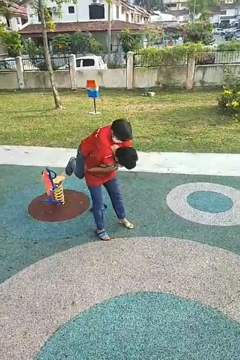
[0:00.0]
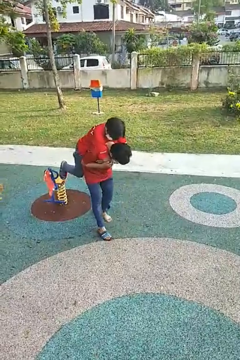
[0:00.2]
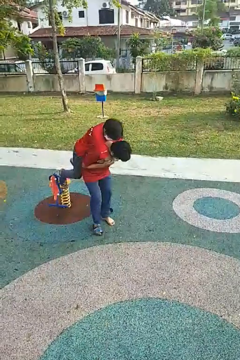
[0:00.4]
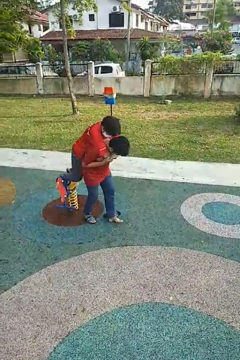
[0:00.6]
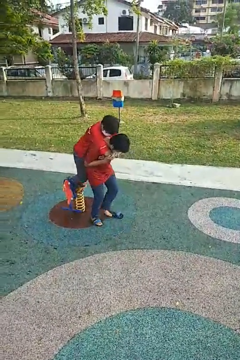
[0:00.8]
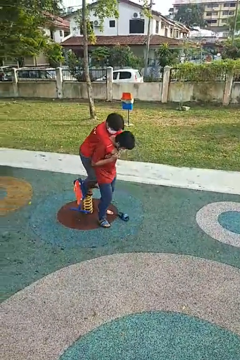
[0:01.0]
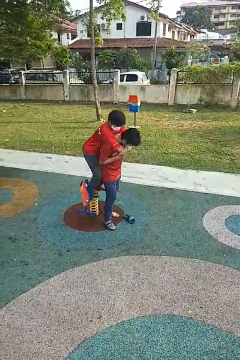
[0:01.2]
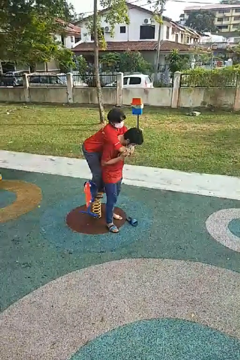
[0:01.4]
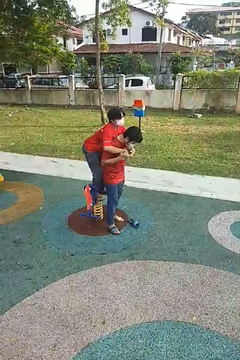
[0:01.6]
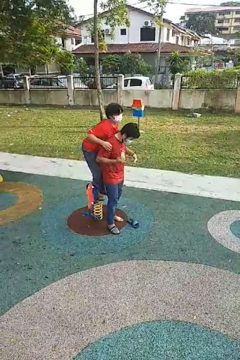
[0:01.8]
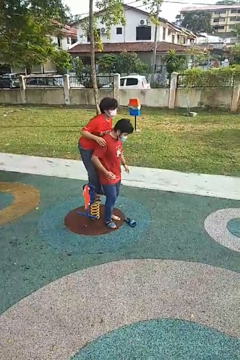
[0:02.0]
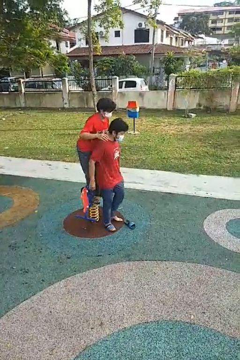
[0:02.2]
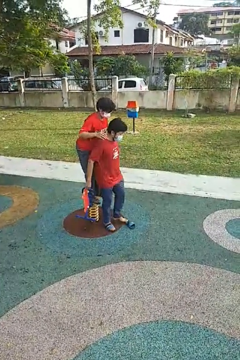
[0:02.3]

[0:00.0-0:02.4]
person puts down person

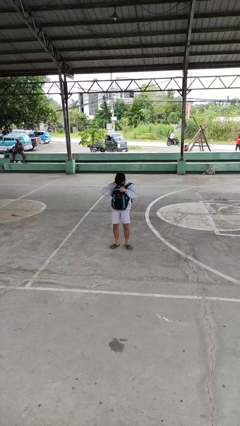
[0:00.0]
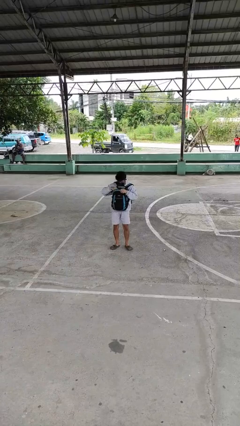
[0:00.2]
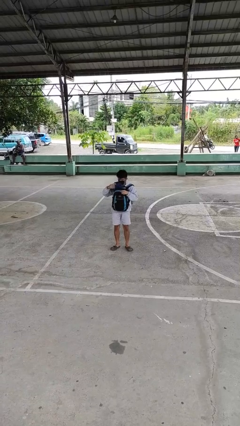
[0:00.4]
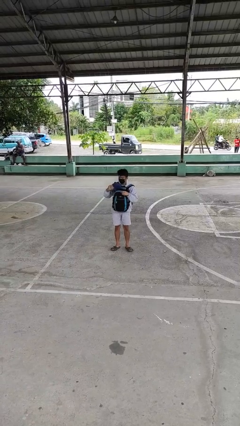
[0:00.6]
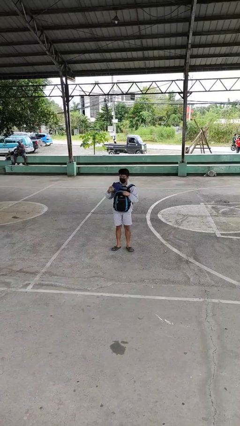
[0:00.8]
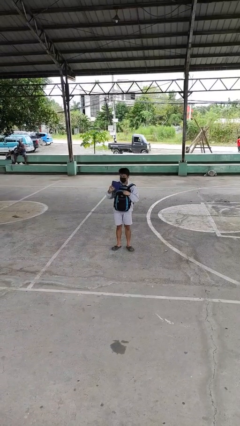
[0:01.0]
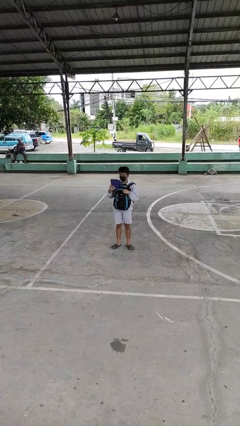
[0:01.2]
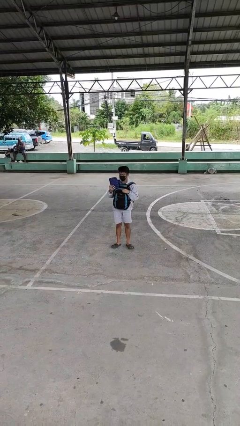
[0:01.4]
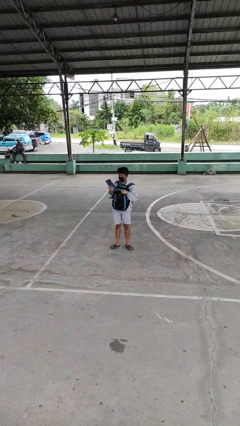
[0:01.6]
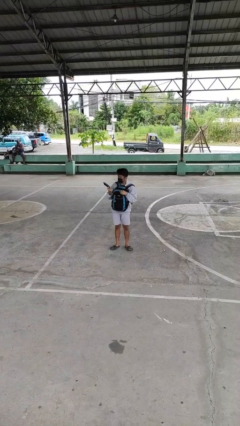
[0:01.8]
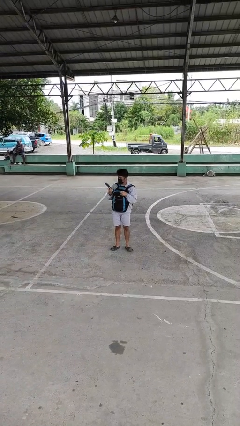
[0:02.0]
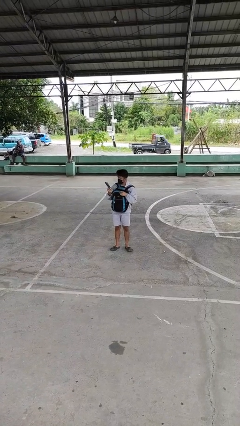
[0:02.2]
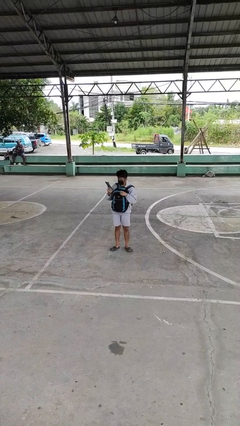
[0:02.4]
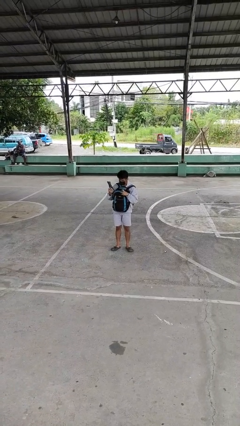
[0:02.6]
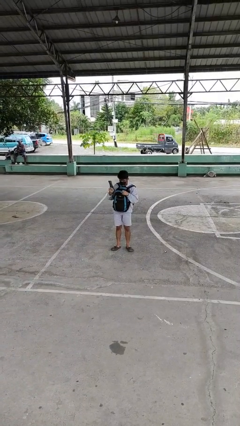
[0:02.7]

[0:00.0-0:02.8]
person takes object from backpack

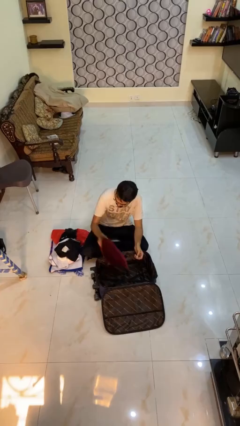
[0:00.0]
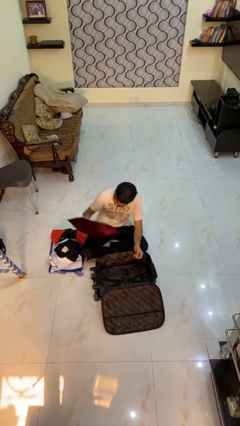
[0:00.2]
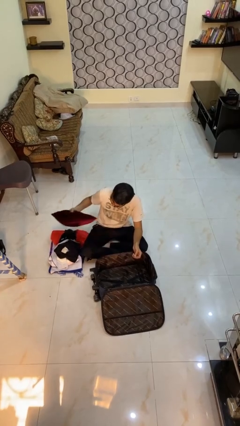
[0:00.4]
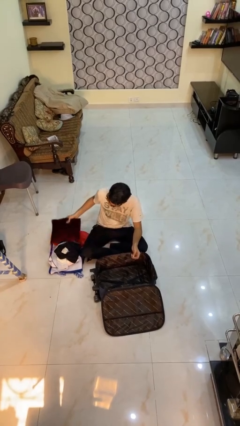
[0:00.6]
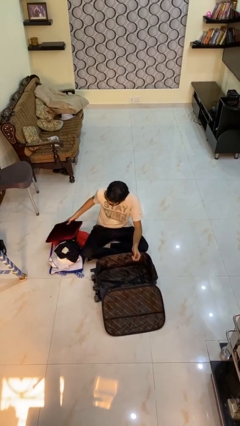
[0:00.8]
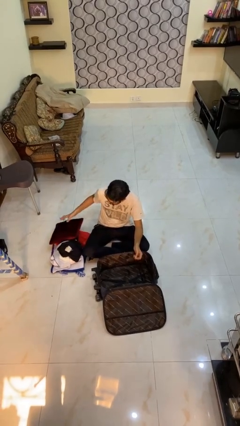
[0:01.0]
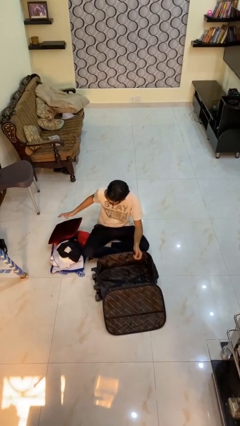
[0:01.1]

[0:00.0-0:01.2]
person unloads clothes from suitcase

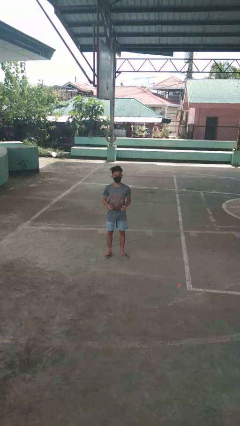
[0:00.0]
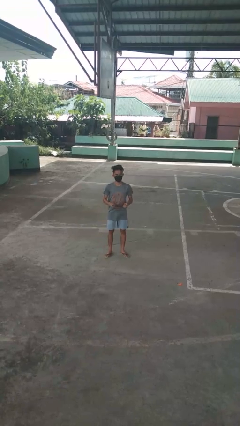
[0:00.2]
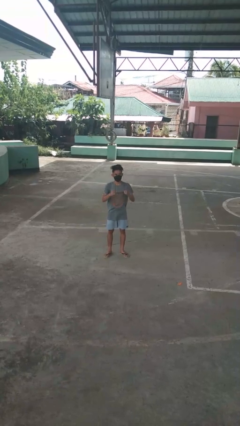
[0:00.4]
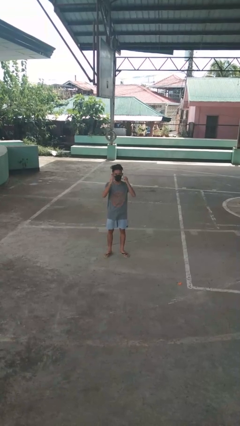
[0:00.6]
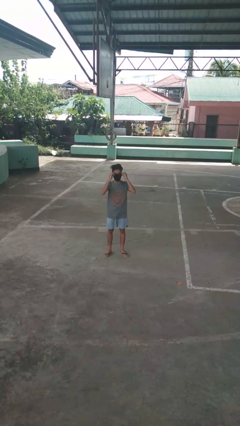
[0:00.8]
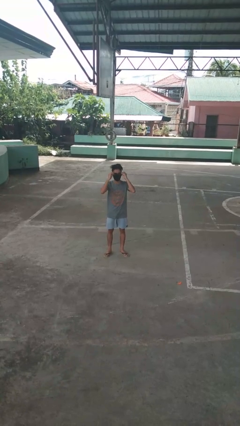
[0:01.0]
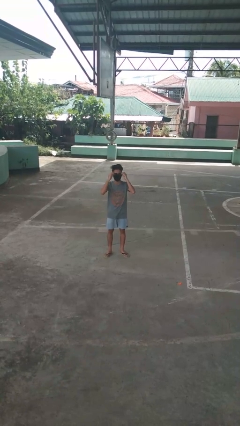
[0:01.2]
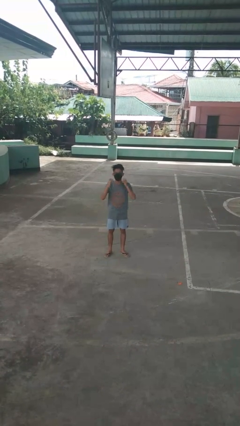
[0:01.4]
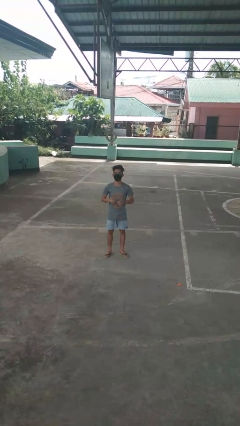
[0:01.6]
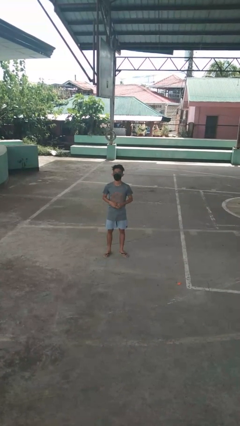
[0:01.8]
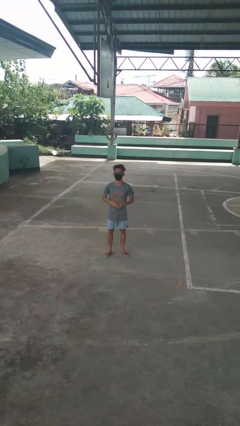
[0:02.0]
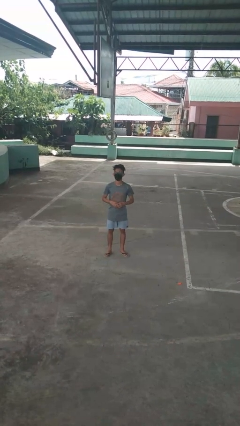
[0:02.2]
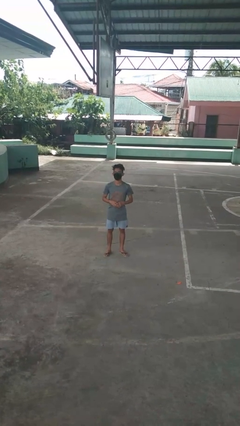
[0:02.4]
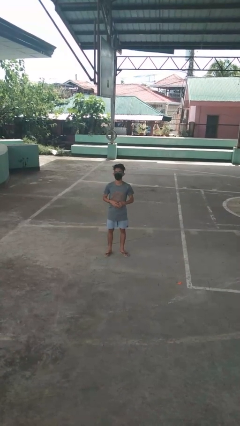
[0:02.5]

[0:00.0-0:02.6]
person puts on glasses

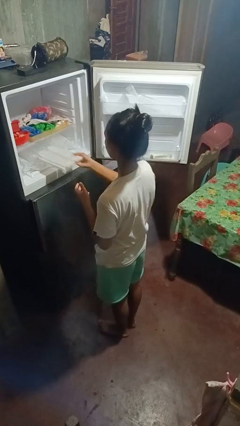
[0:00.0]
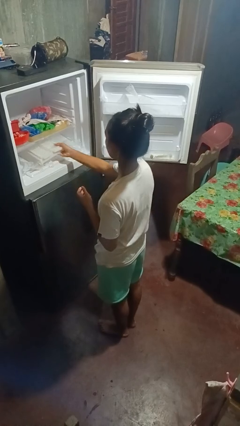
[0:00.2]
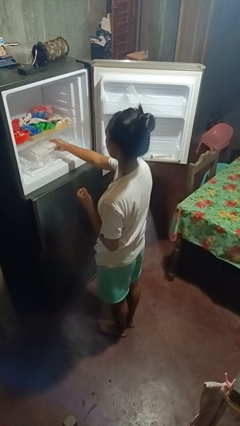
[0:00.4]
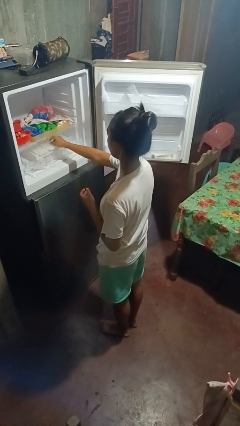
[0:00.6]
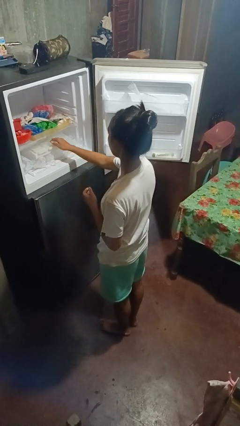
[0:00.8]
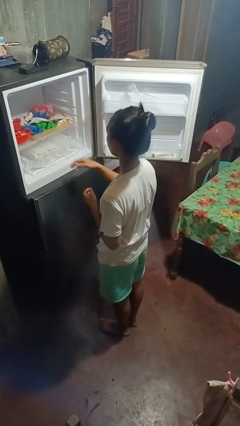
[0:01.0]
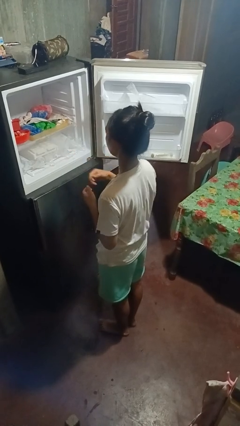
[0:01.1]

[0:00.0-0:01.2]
person puts object into refrigerator

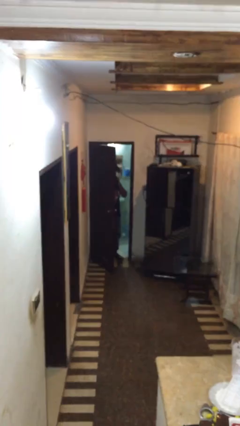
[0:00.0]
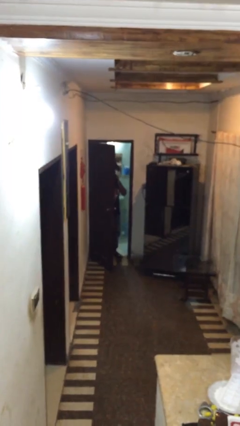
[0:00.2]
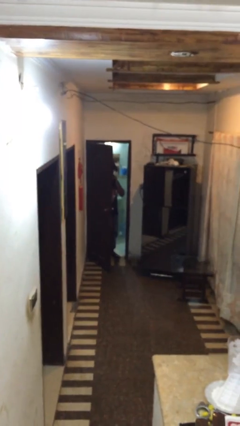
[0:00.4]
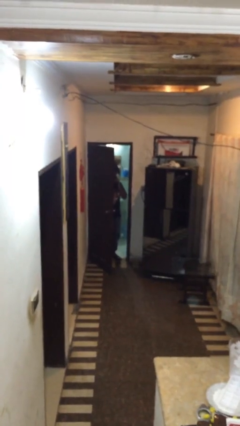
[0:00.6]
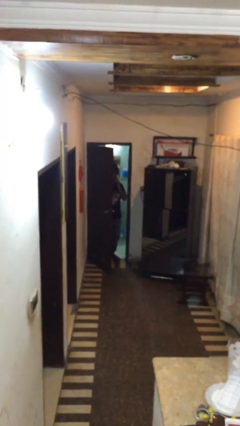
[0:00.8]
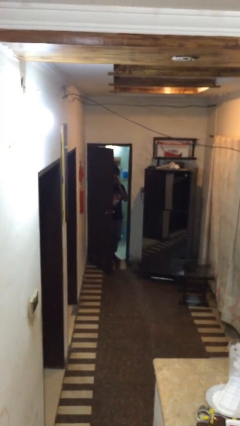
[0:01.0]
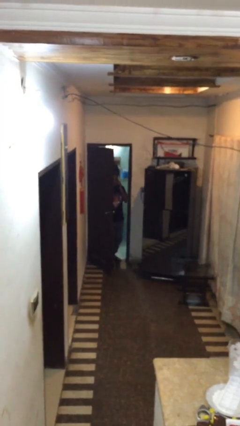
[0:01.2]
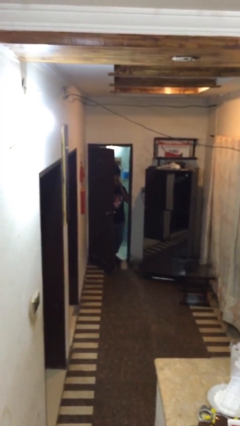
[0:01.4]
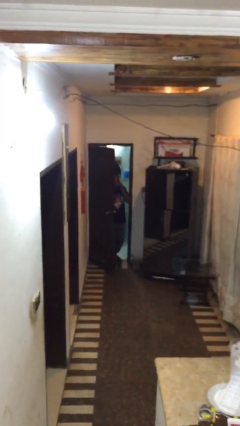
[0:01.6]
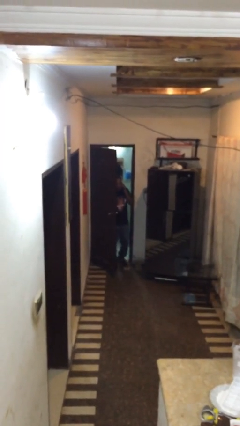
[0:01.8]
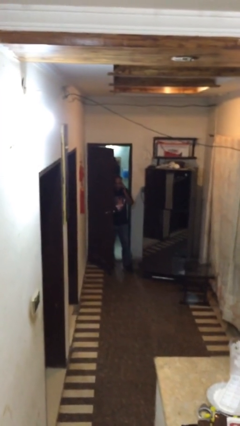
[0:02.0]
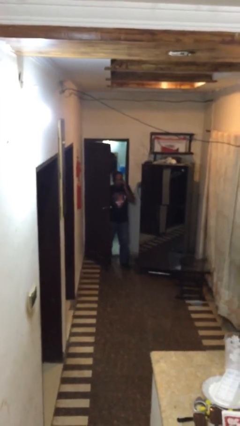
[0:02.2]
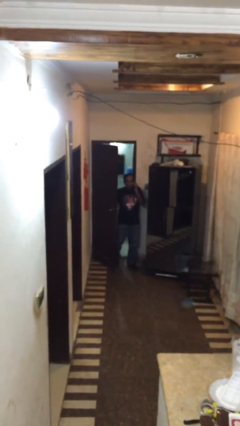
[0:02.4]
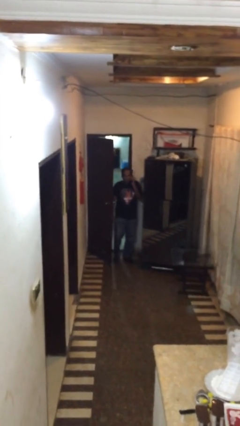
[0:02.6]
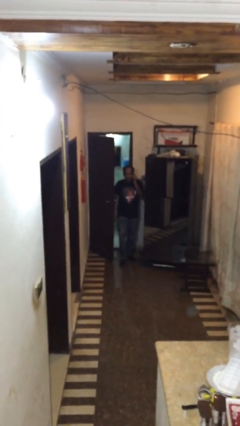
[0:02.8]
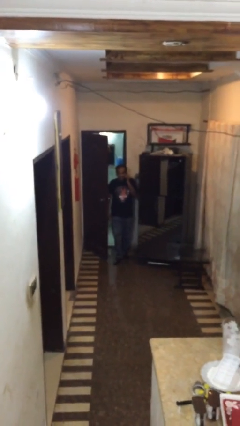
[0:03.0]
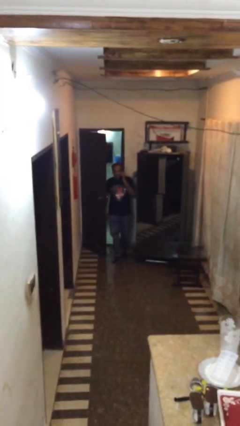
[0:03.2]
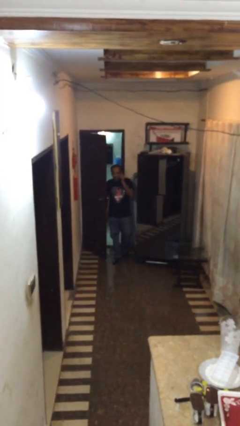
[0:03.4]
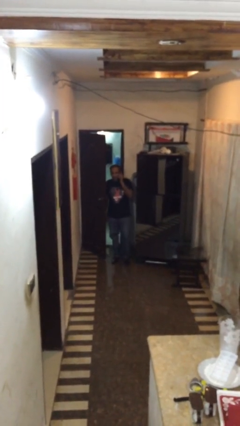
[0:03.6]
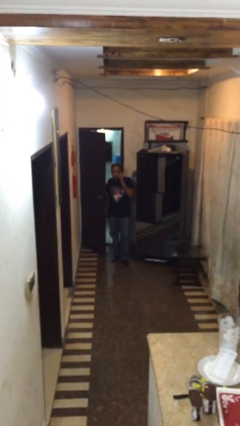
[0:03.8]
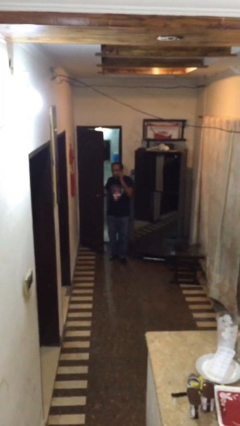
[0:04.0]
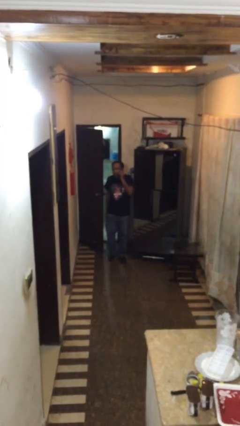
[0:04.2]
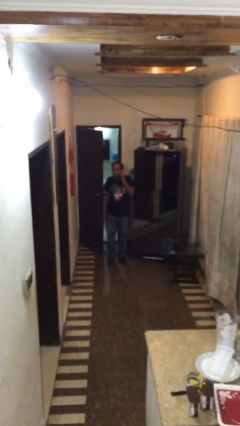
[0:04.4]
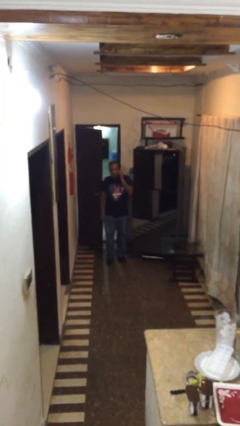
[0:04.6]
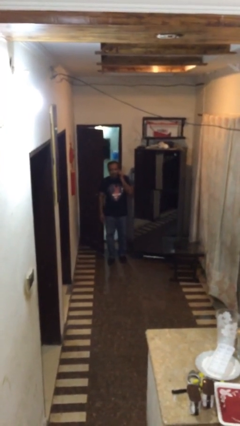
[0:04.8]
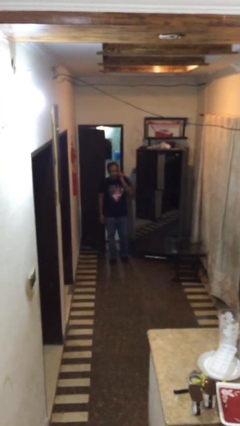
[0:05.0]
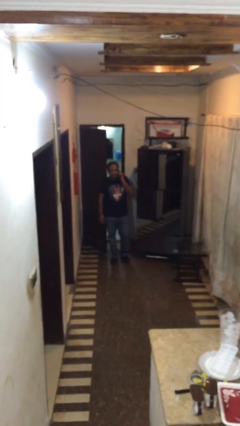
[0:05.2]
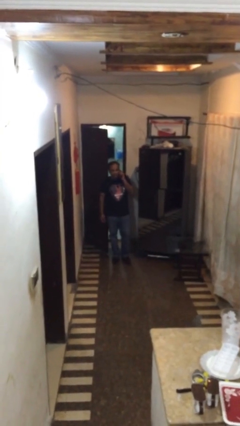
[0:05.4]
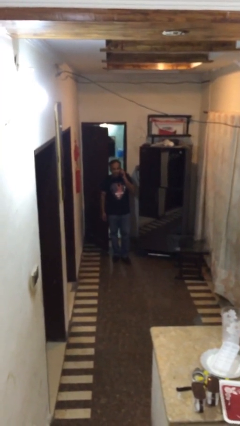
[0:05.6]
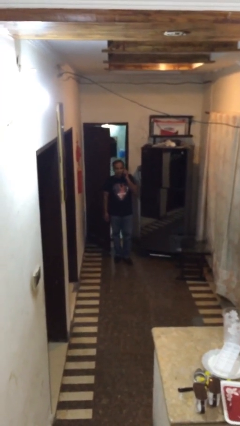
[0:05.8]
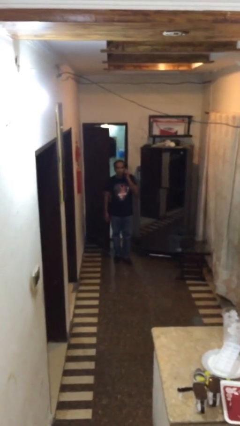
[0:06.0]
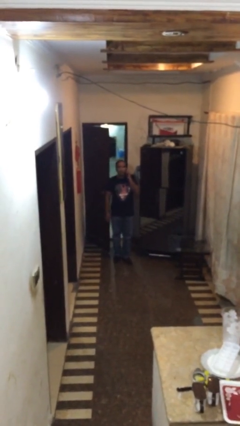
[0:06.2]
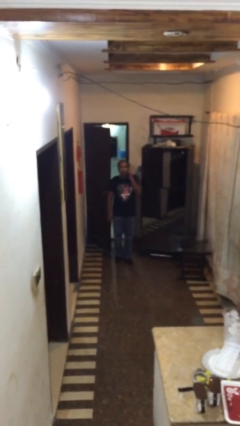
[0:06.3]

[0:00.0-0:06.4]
person enters scene through structure

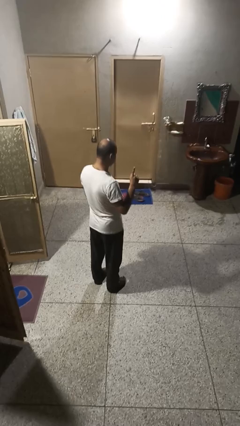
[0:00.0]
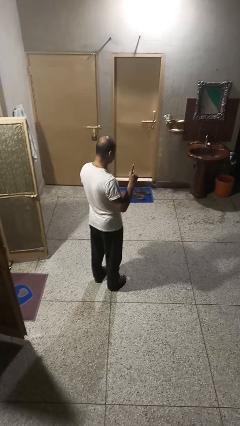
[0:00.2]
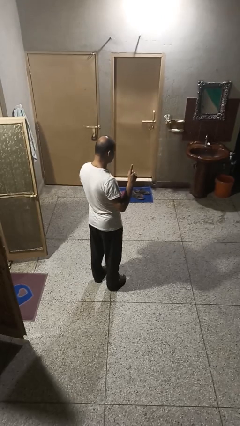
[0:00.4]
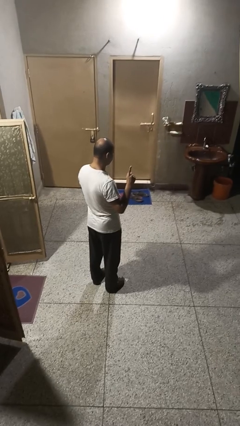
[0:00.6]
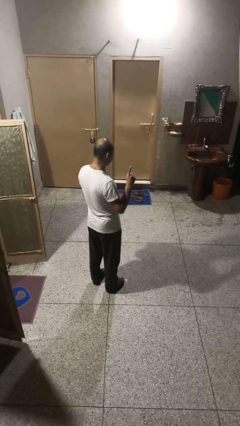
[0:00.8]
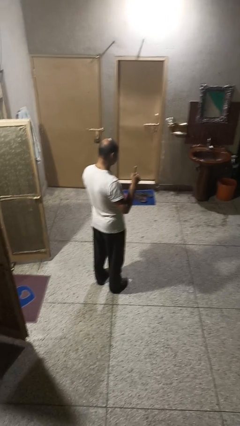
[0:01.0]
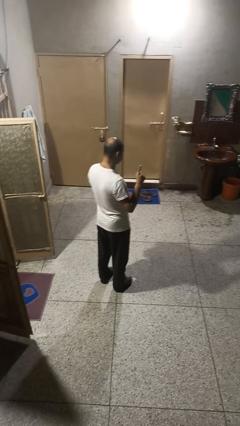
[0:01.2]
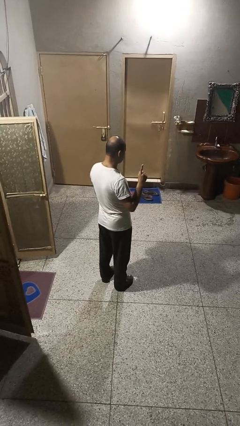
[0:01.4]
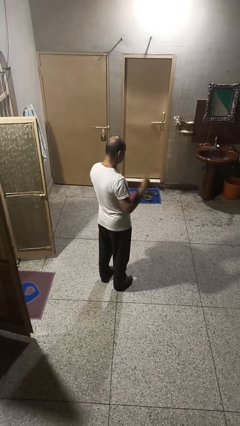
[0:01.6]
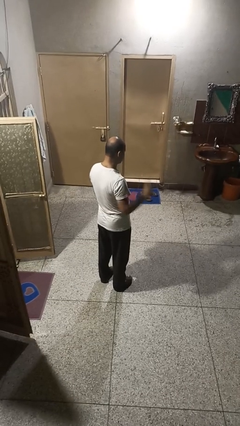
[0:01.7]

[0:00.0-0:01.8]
person gestures number one
